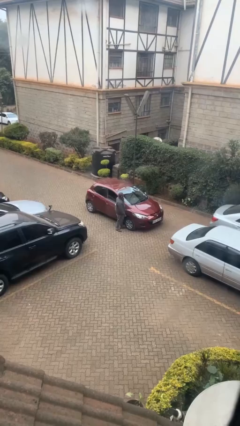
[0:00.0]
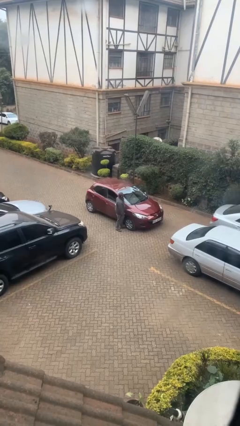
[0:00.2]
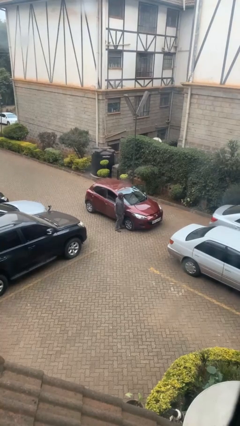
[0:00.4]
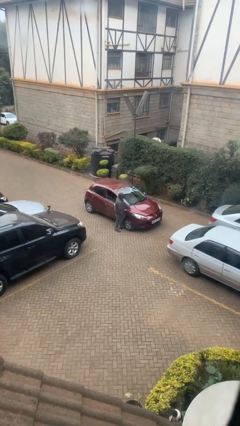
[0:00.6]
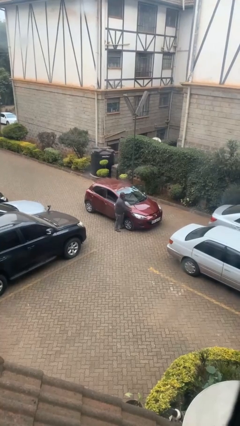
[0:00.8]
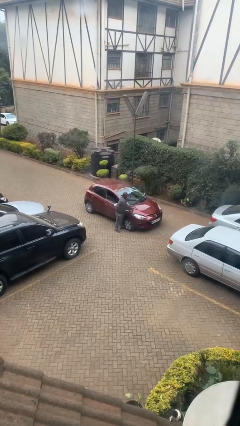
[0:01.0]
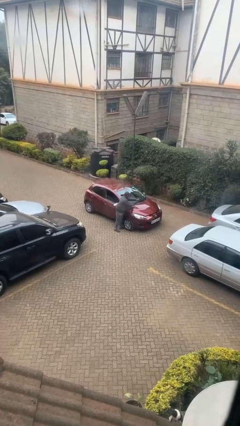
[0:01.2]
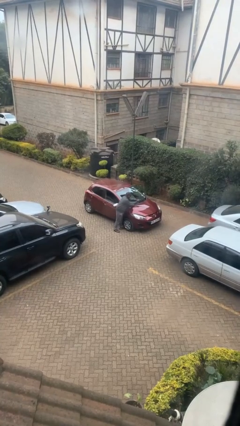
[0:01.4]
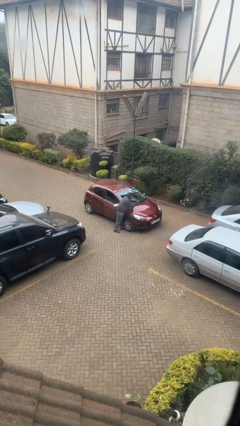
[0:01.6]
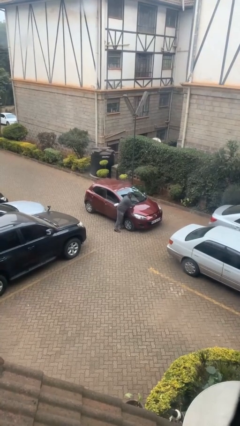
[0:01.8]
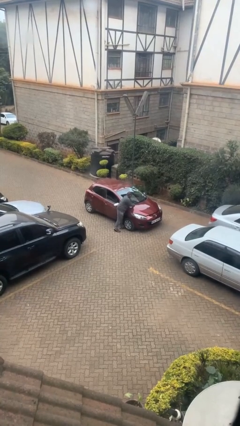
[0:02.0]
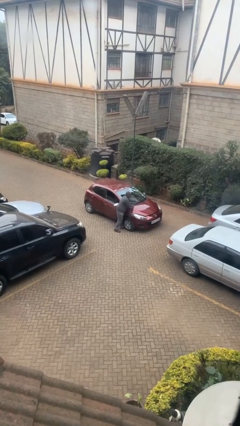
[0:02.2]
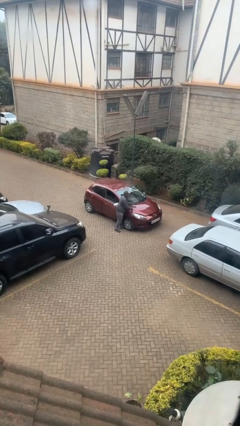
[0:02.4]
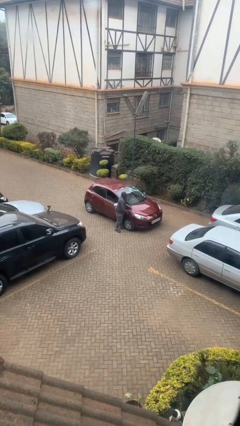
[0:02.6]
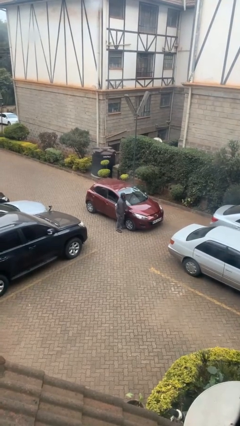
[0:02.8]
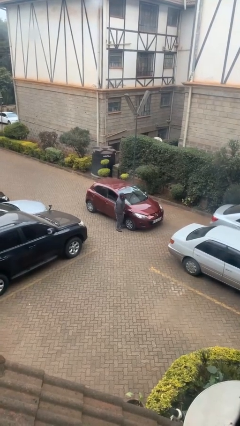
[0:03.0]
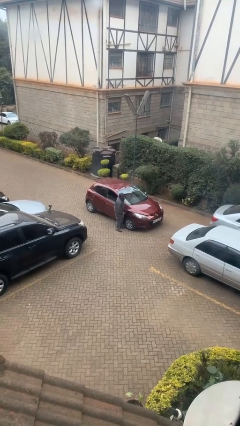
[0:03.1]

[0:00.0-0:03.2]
person flips down car wipers

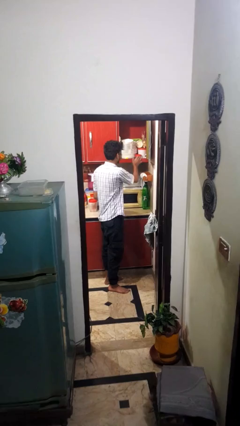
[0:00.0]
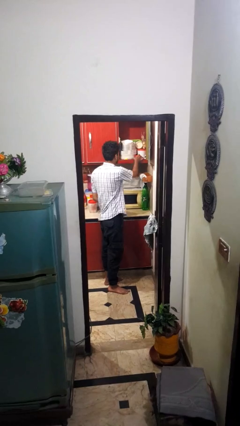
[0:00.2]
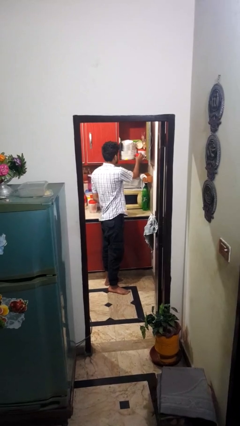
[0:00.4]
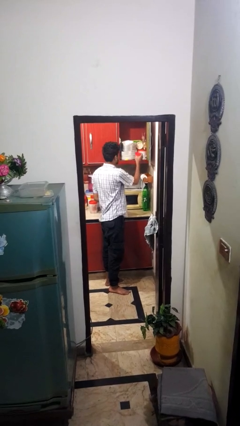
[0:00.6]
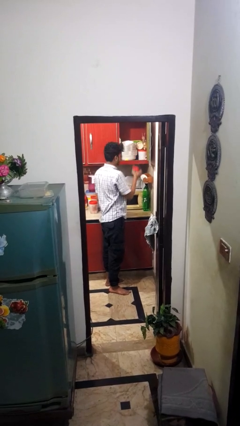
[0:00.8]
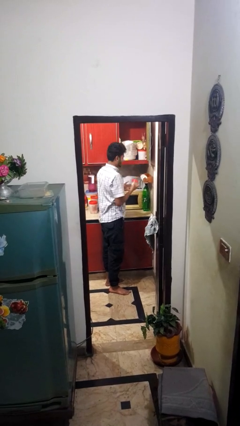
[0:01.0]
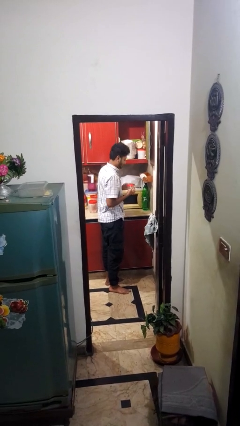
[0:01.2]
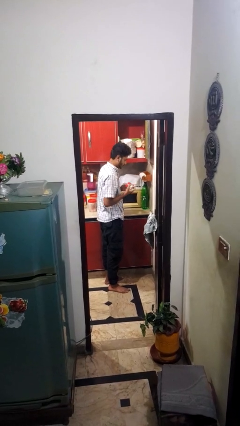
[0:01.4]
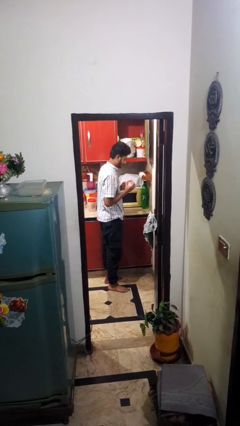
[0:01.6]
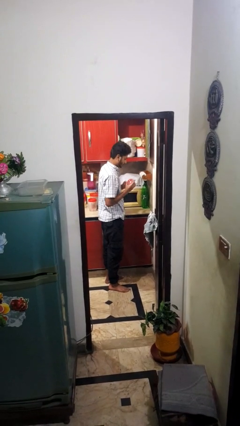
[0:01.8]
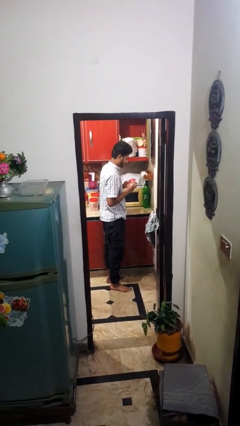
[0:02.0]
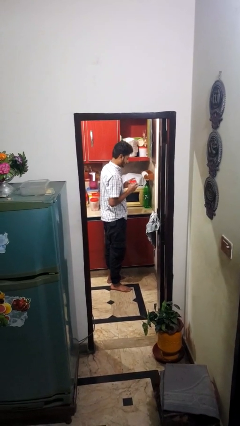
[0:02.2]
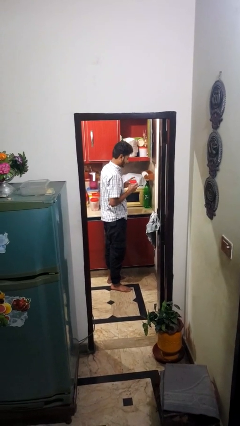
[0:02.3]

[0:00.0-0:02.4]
person picks up object from cabinet

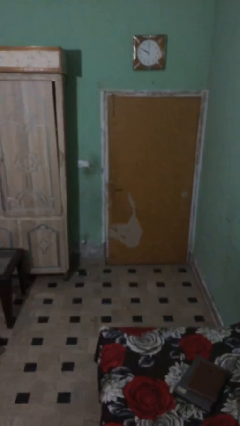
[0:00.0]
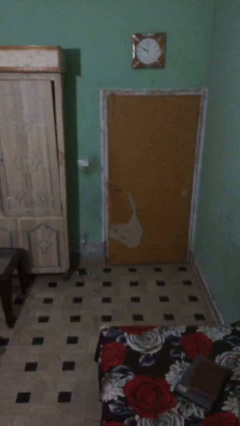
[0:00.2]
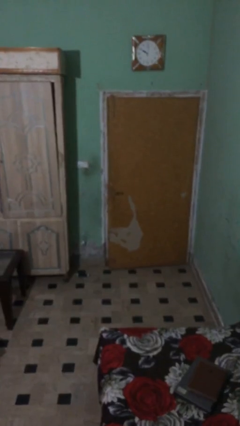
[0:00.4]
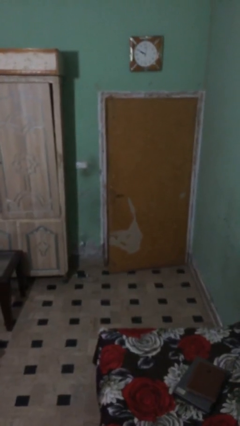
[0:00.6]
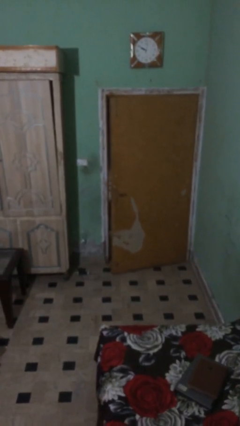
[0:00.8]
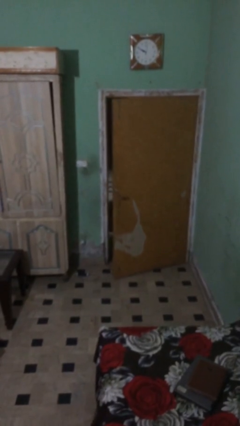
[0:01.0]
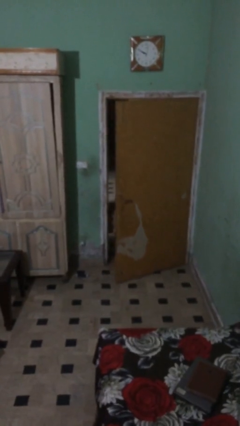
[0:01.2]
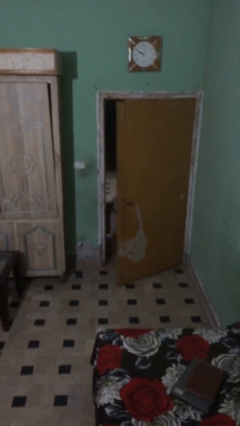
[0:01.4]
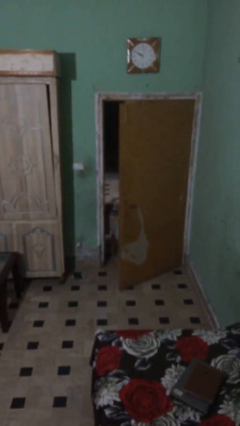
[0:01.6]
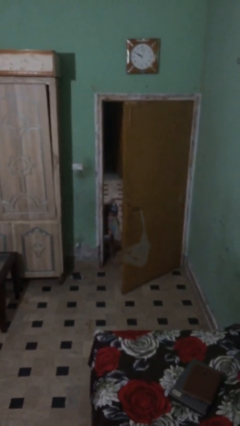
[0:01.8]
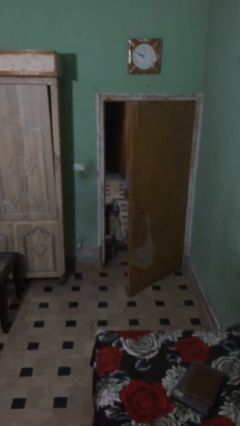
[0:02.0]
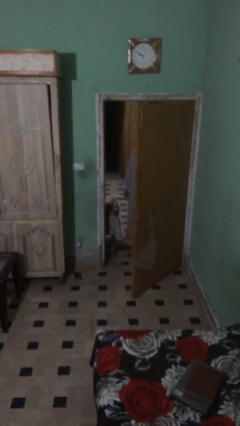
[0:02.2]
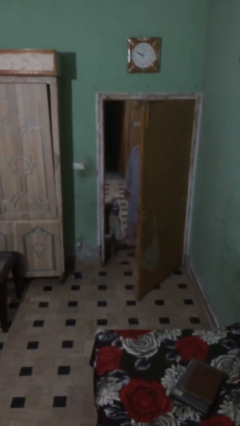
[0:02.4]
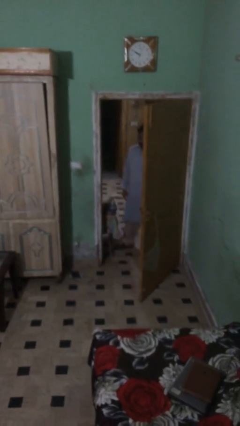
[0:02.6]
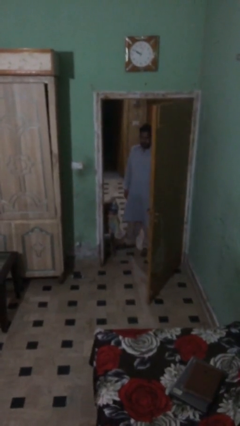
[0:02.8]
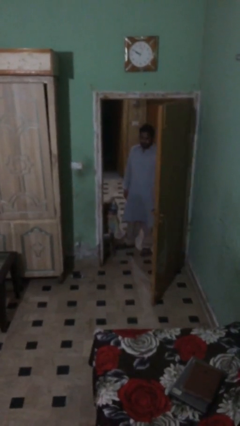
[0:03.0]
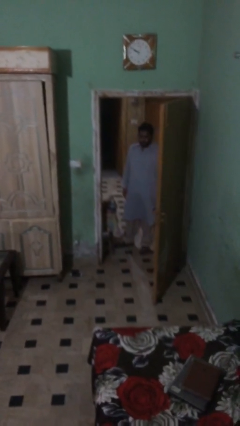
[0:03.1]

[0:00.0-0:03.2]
person opens facility door

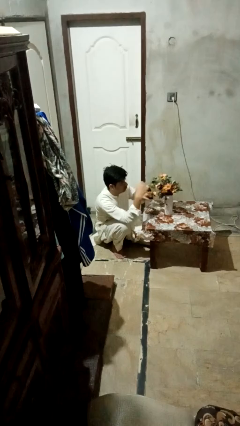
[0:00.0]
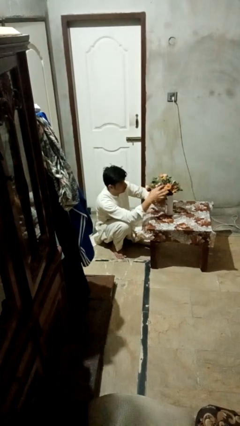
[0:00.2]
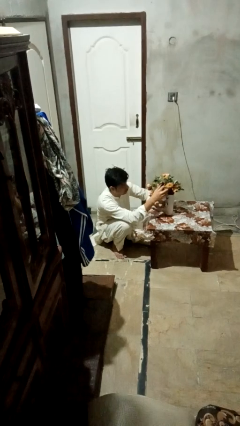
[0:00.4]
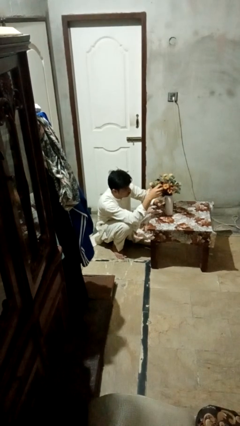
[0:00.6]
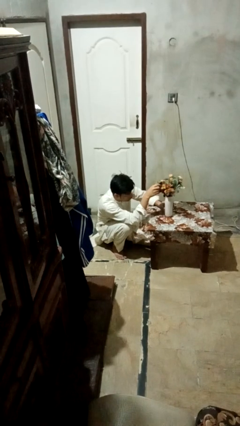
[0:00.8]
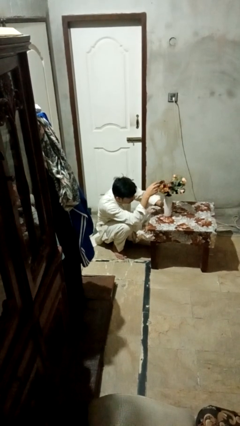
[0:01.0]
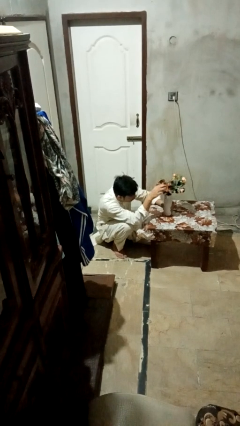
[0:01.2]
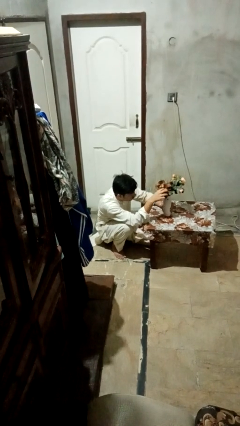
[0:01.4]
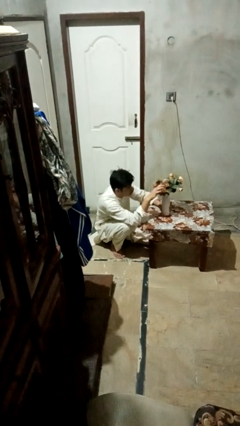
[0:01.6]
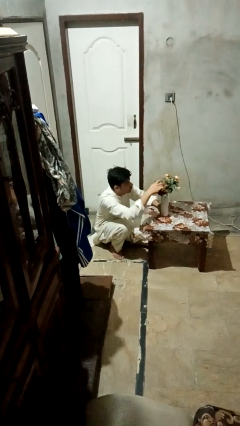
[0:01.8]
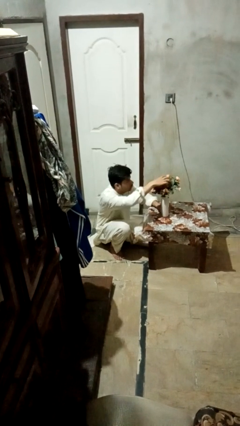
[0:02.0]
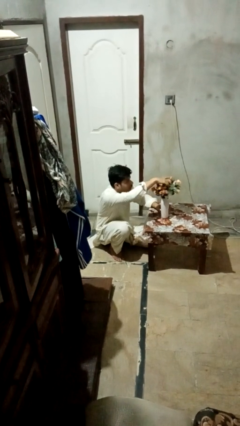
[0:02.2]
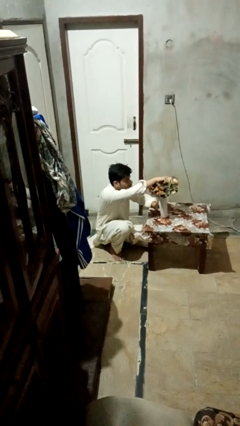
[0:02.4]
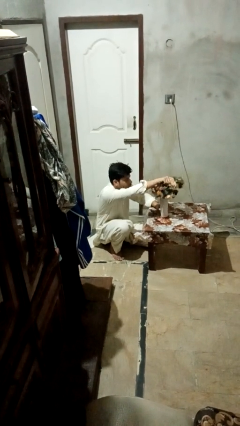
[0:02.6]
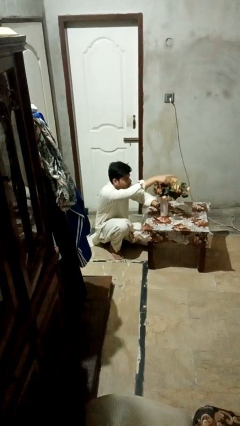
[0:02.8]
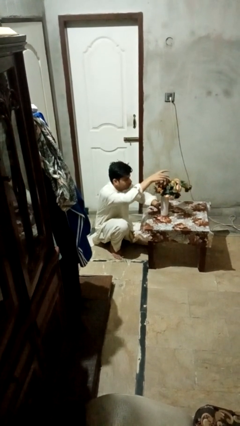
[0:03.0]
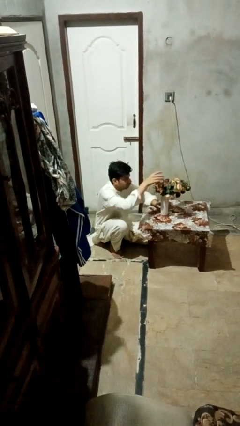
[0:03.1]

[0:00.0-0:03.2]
person arranges flowers in vase

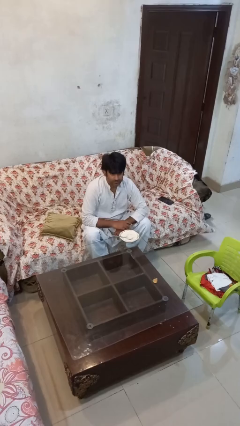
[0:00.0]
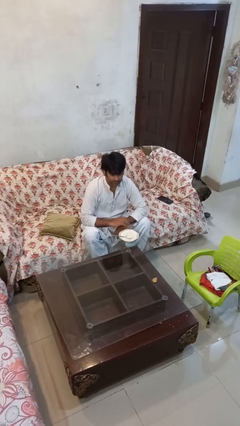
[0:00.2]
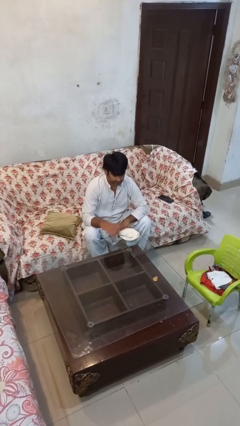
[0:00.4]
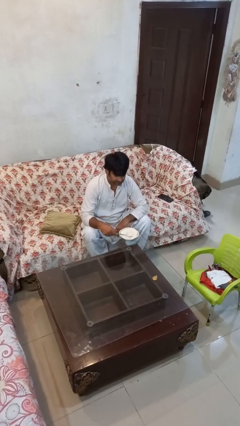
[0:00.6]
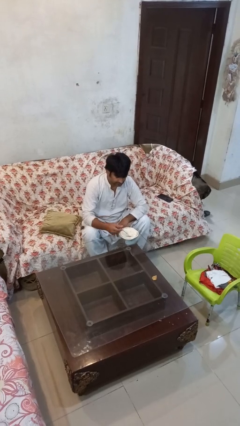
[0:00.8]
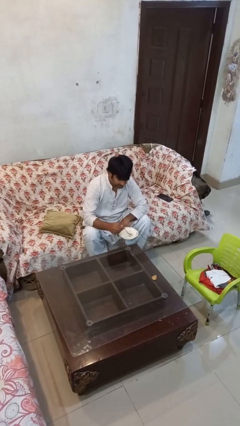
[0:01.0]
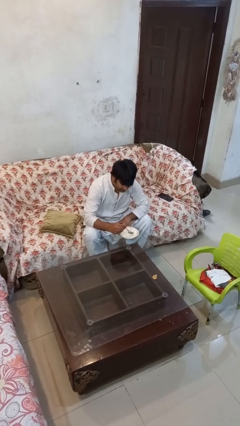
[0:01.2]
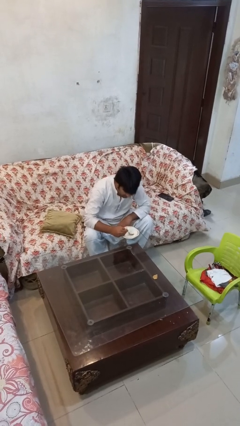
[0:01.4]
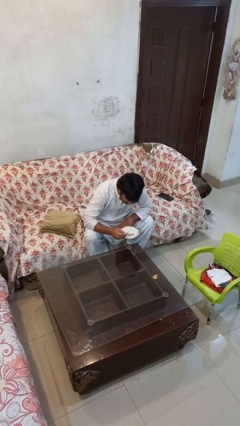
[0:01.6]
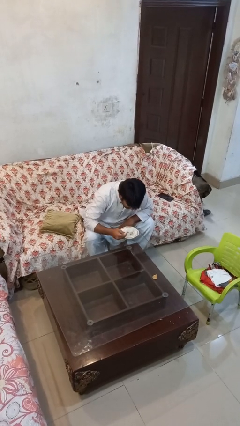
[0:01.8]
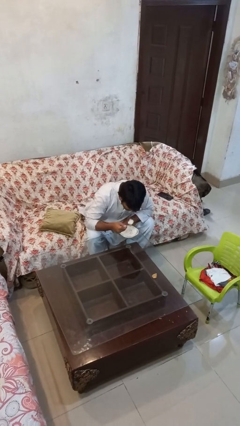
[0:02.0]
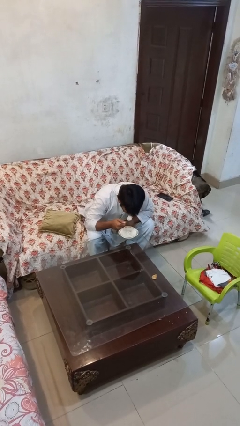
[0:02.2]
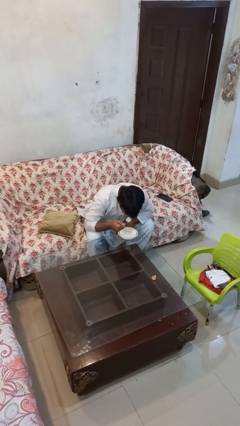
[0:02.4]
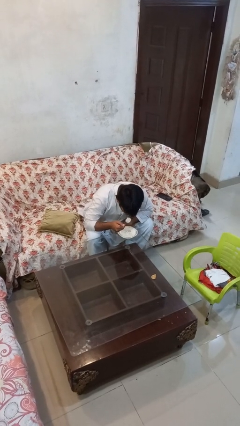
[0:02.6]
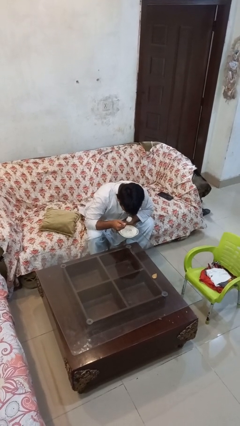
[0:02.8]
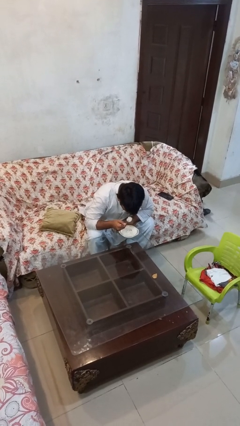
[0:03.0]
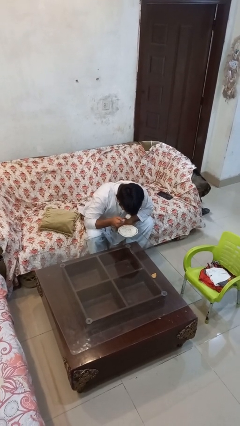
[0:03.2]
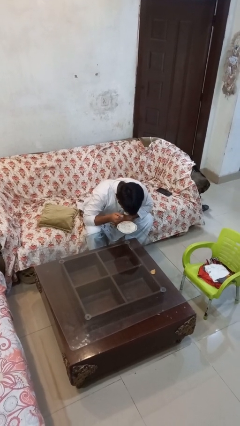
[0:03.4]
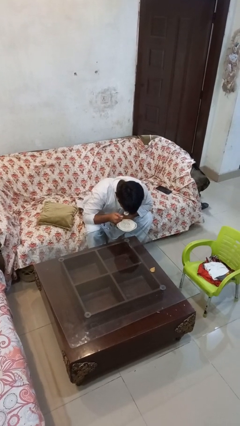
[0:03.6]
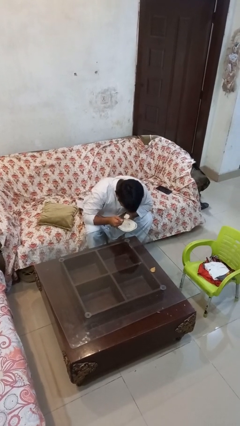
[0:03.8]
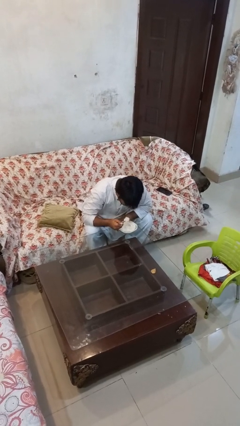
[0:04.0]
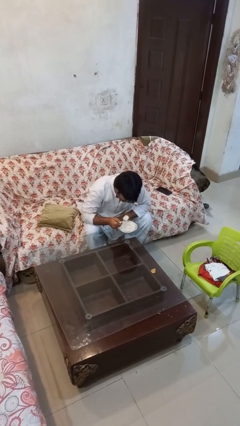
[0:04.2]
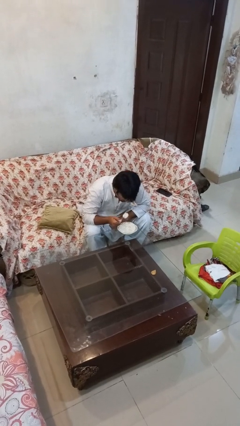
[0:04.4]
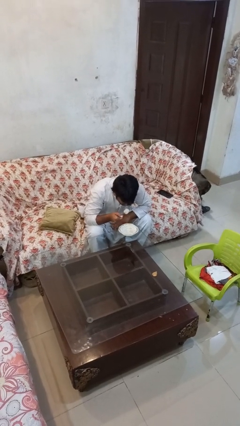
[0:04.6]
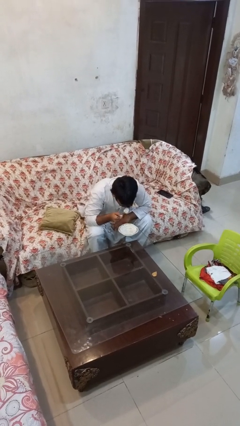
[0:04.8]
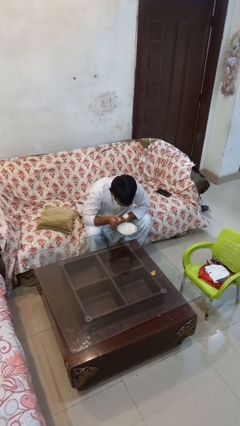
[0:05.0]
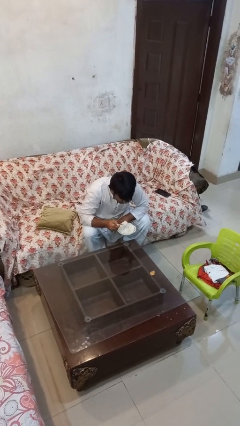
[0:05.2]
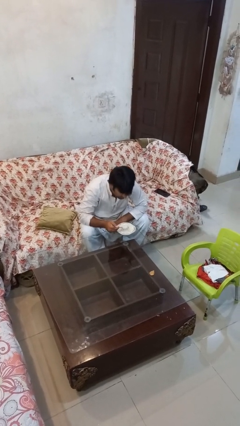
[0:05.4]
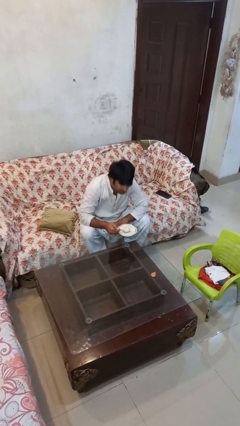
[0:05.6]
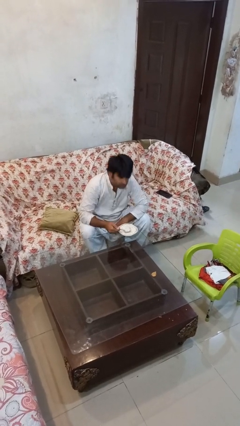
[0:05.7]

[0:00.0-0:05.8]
person eats with utensil
